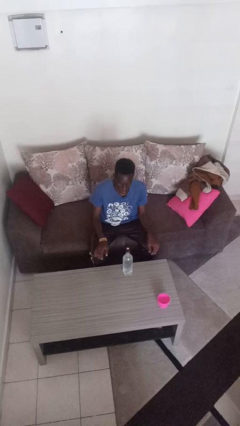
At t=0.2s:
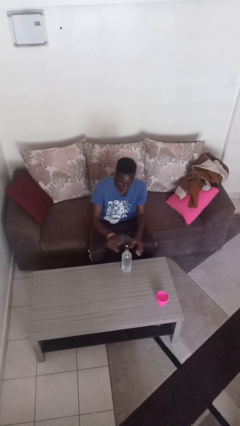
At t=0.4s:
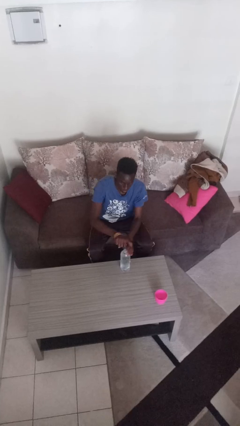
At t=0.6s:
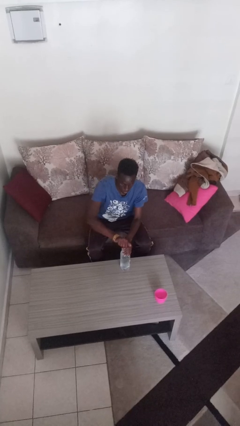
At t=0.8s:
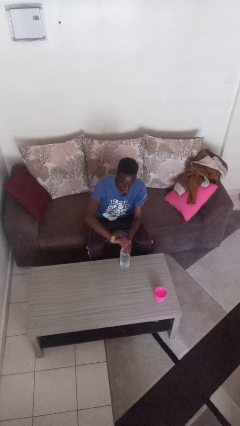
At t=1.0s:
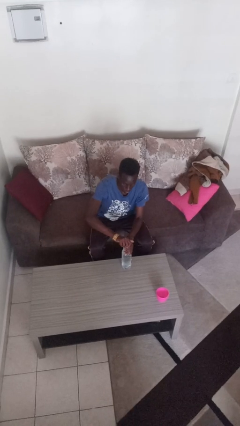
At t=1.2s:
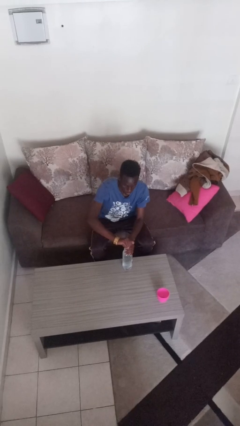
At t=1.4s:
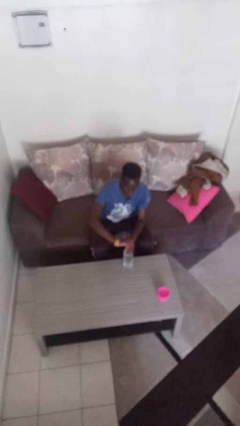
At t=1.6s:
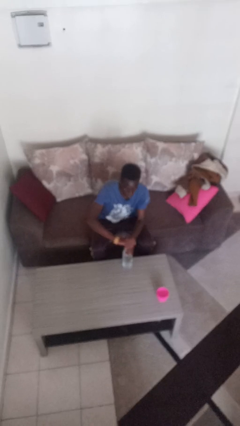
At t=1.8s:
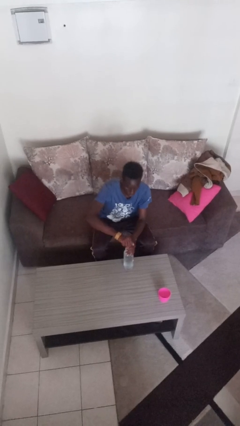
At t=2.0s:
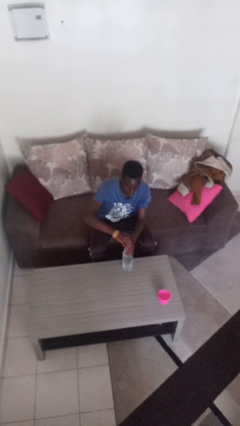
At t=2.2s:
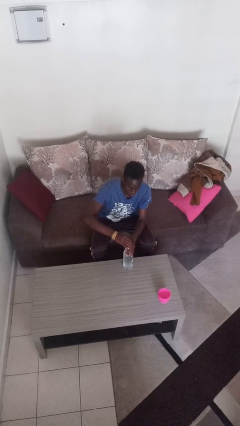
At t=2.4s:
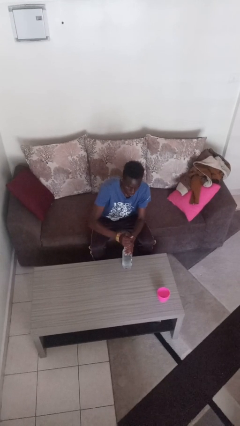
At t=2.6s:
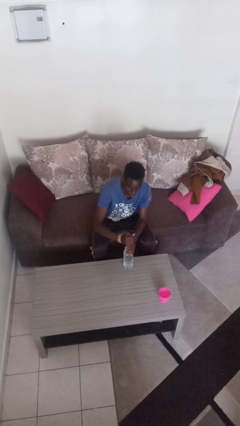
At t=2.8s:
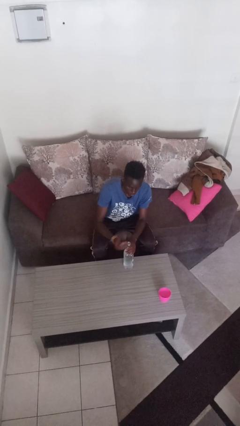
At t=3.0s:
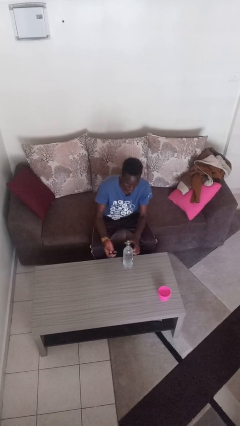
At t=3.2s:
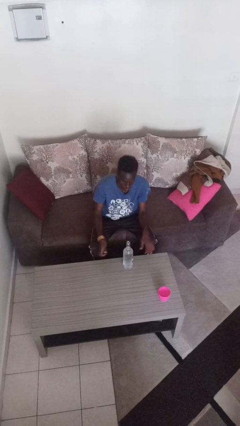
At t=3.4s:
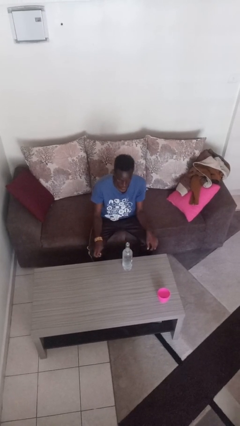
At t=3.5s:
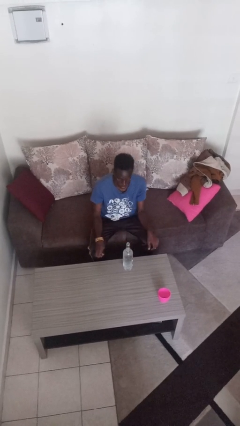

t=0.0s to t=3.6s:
person unscrews lid from bottle

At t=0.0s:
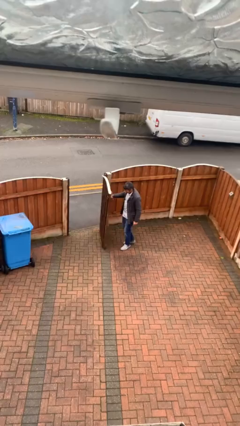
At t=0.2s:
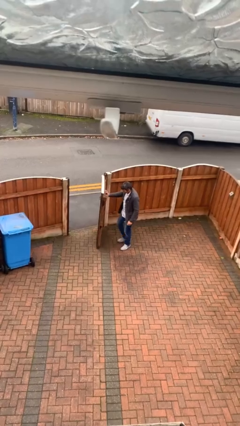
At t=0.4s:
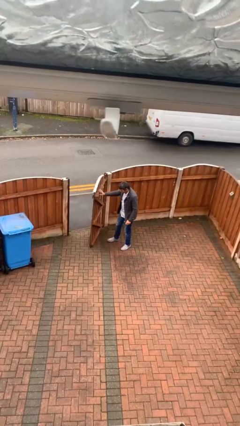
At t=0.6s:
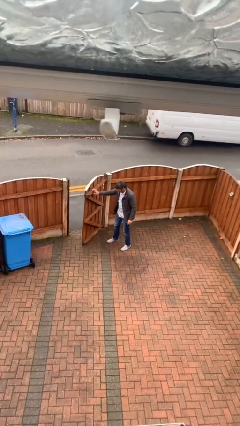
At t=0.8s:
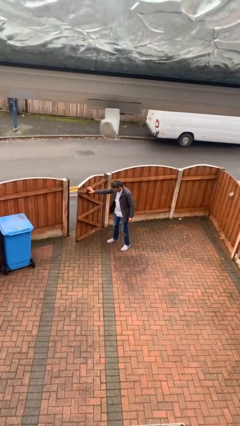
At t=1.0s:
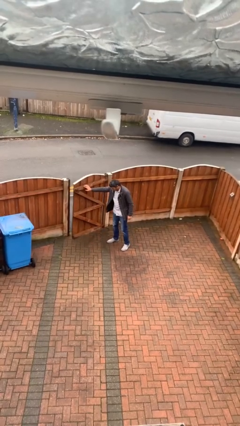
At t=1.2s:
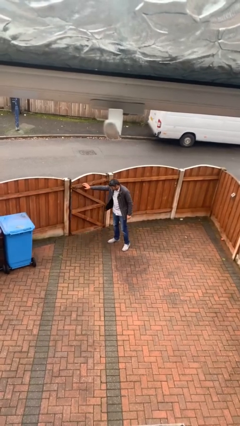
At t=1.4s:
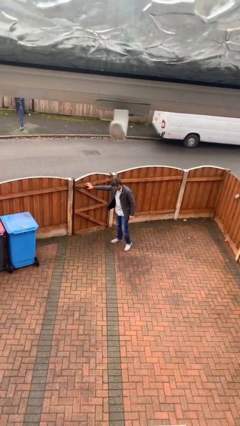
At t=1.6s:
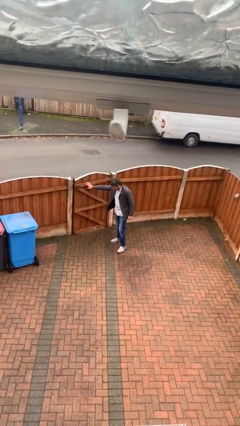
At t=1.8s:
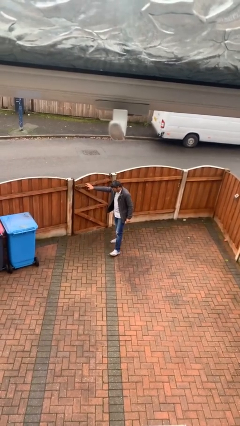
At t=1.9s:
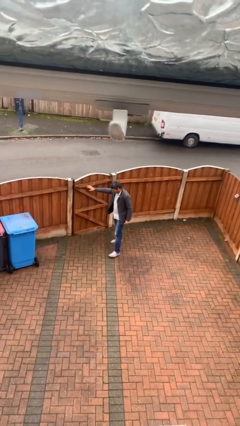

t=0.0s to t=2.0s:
person closes facility door

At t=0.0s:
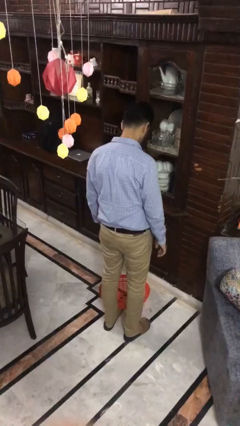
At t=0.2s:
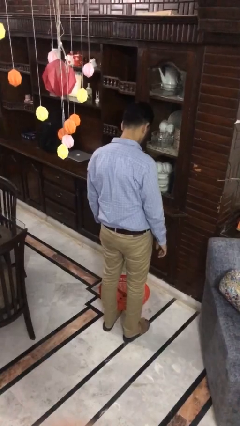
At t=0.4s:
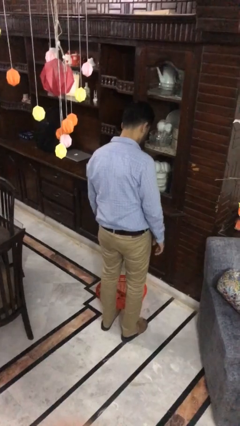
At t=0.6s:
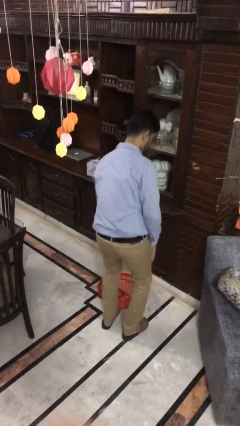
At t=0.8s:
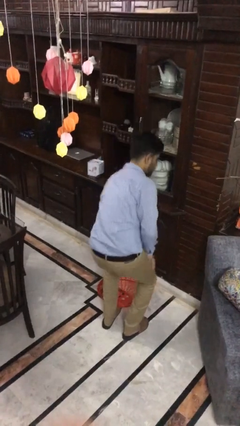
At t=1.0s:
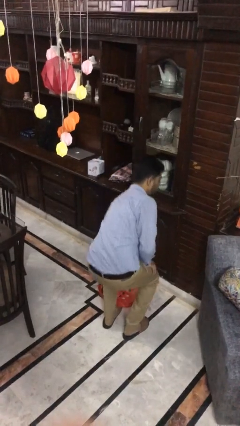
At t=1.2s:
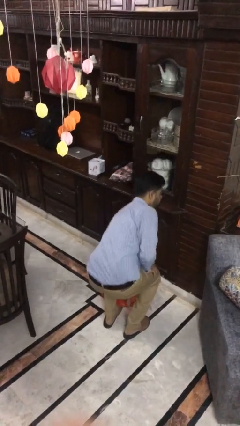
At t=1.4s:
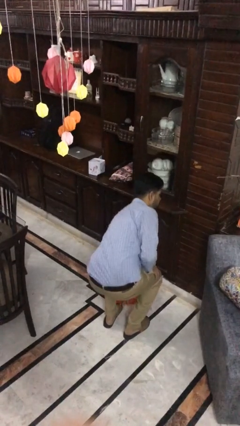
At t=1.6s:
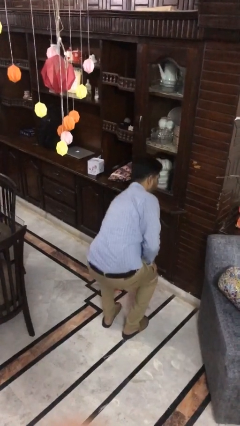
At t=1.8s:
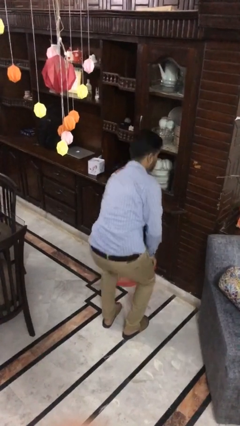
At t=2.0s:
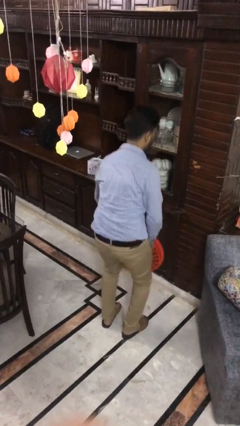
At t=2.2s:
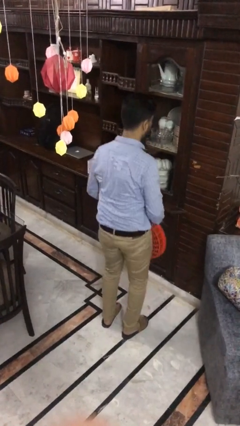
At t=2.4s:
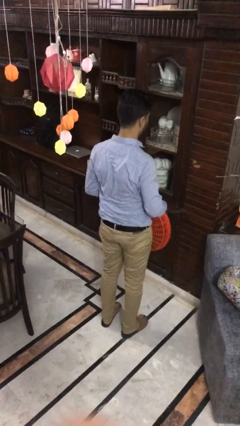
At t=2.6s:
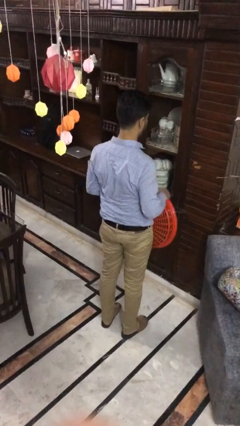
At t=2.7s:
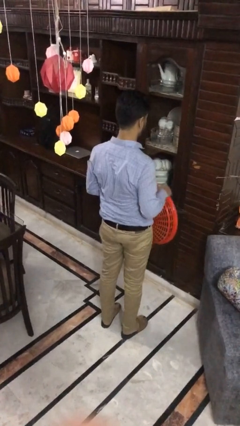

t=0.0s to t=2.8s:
person picks up object from floor

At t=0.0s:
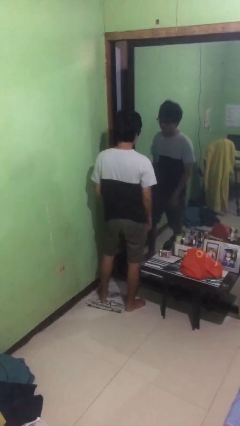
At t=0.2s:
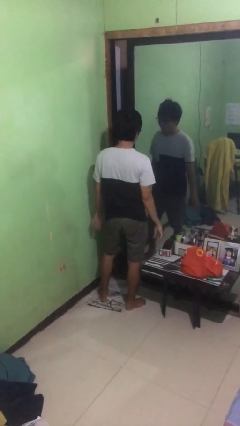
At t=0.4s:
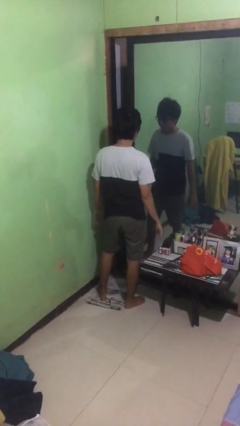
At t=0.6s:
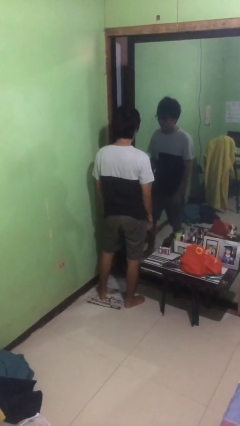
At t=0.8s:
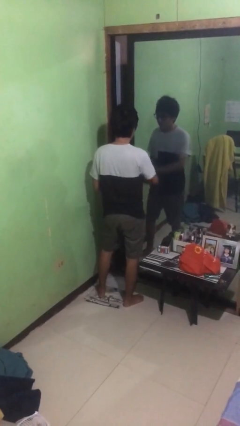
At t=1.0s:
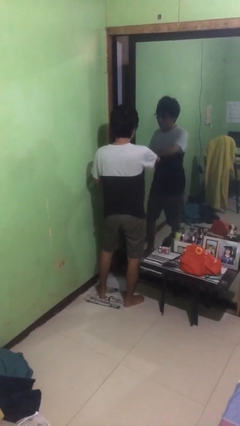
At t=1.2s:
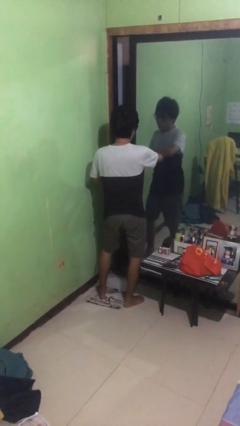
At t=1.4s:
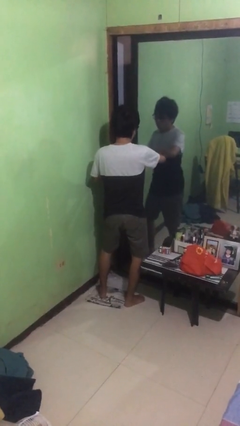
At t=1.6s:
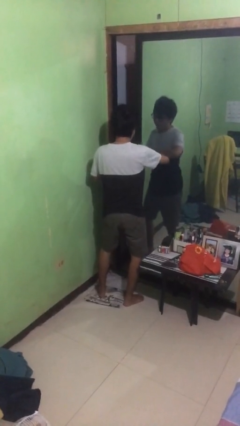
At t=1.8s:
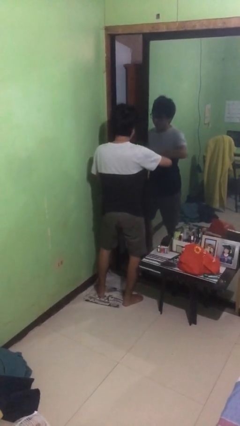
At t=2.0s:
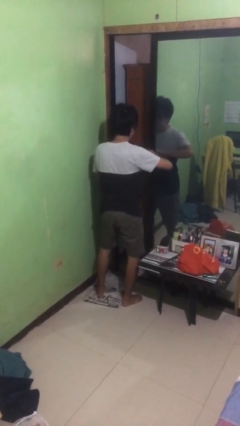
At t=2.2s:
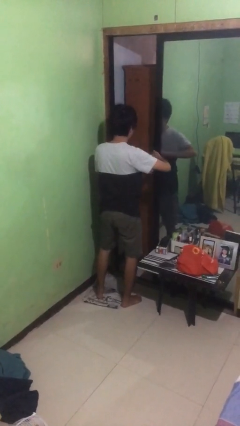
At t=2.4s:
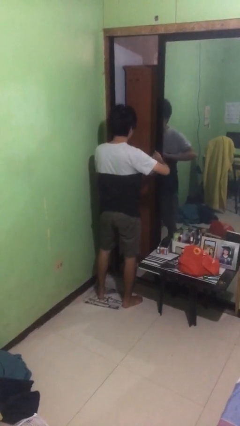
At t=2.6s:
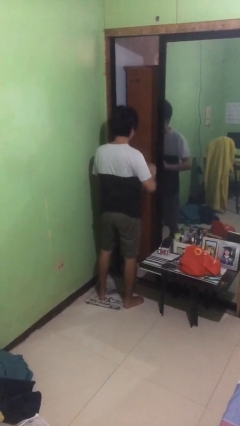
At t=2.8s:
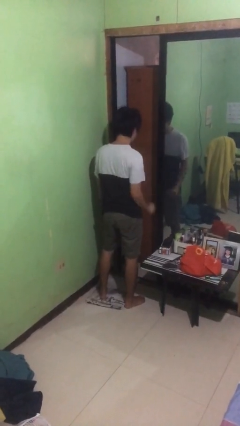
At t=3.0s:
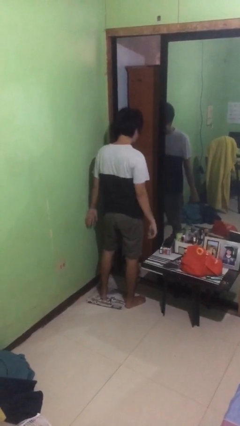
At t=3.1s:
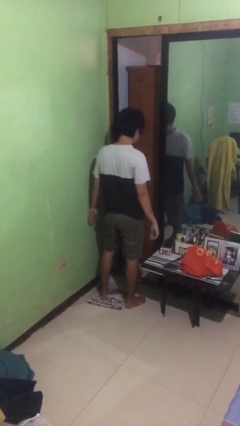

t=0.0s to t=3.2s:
person opens sliding door

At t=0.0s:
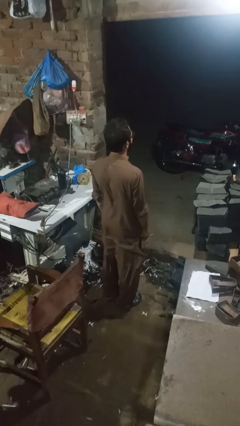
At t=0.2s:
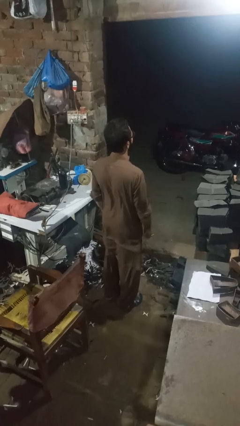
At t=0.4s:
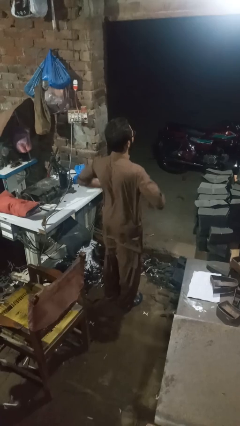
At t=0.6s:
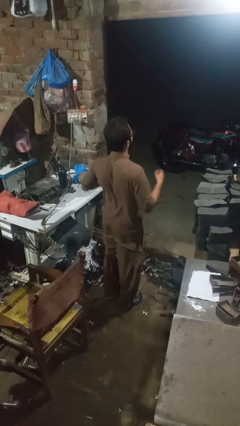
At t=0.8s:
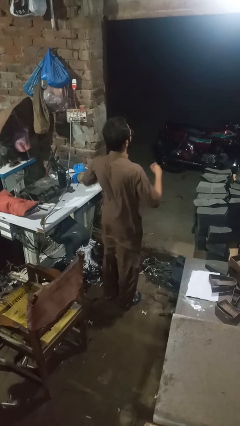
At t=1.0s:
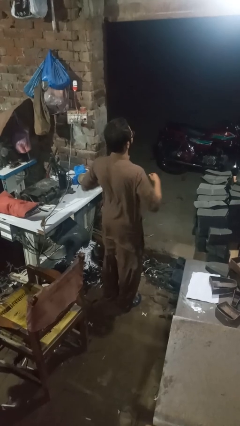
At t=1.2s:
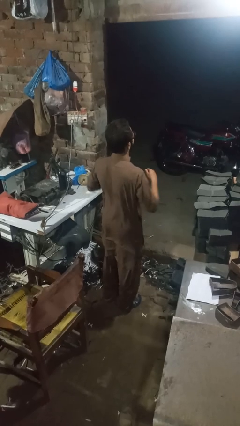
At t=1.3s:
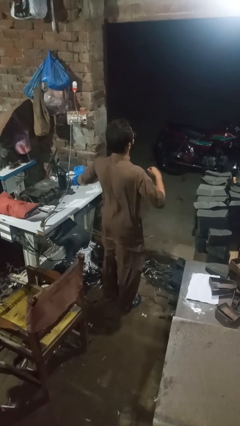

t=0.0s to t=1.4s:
person dances in place

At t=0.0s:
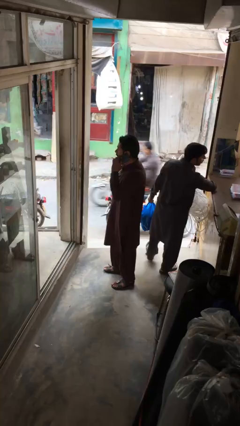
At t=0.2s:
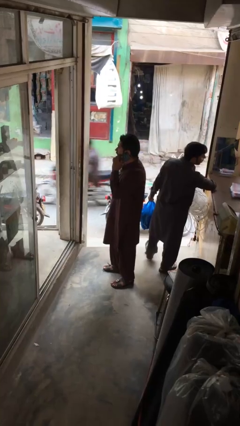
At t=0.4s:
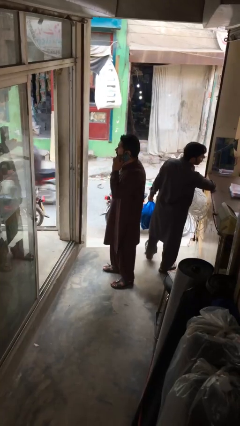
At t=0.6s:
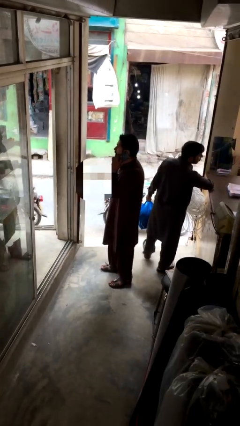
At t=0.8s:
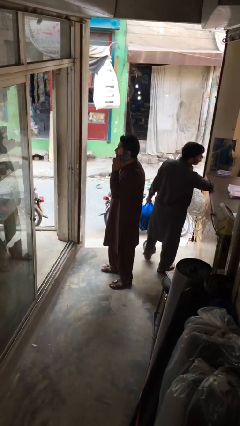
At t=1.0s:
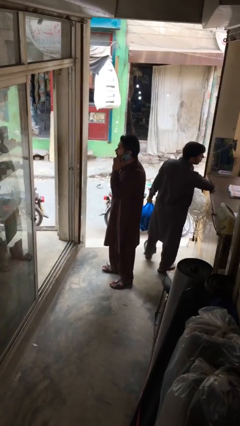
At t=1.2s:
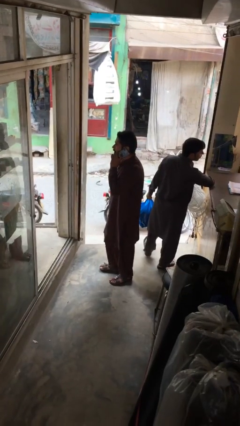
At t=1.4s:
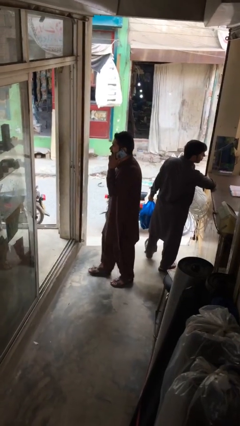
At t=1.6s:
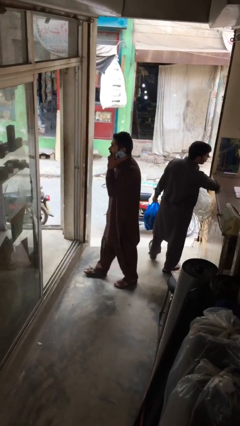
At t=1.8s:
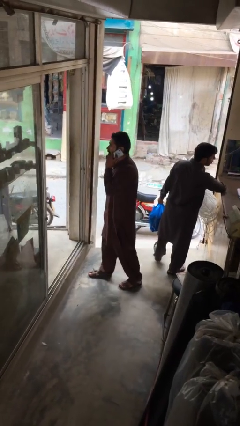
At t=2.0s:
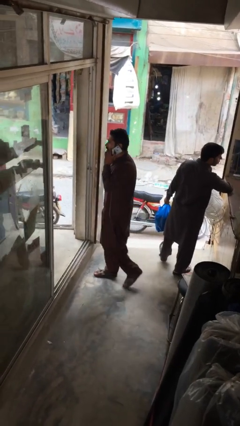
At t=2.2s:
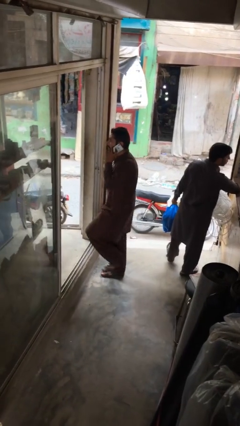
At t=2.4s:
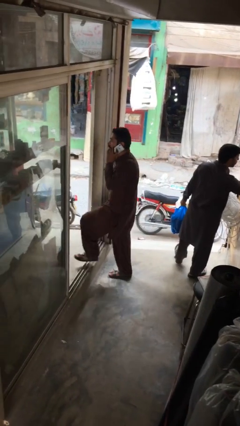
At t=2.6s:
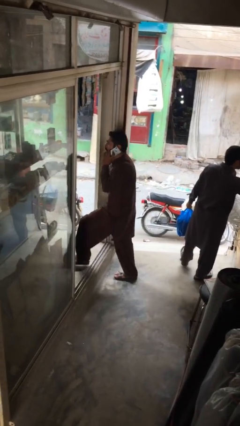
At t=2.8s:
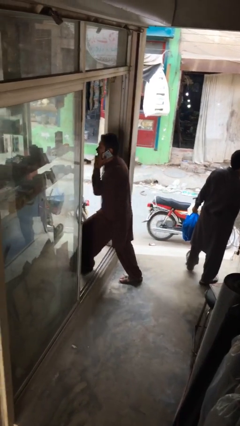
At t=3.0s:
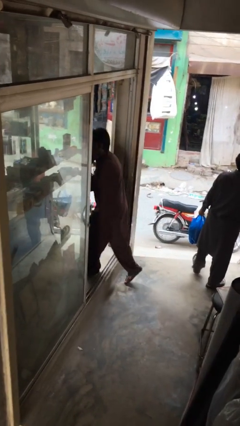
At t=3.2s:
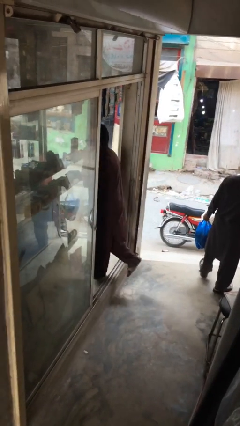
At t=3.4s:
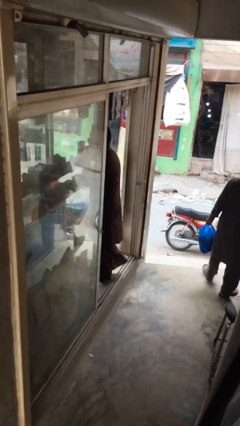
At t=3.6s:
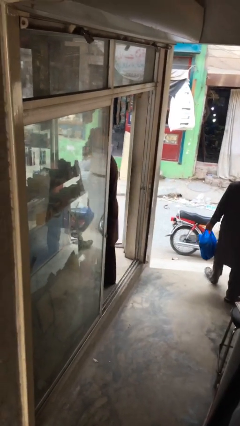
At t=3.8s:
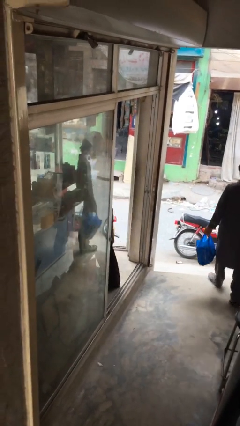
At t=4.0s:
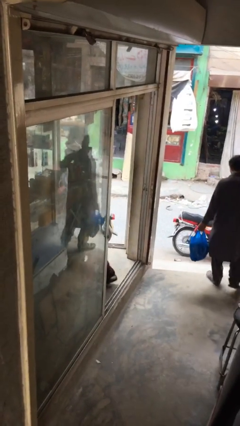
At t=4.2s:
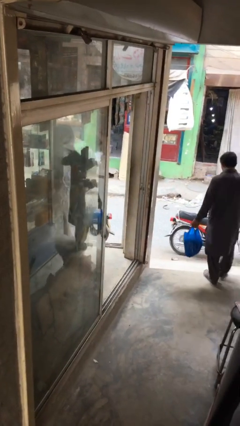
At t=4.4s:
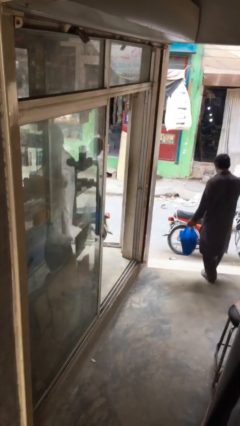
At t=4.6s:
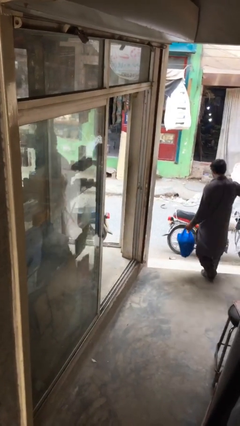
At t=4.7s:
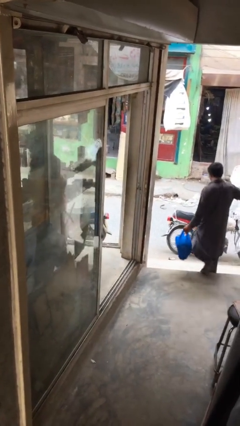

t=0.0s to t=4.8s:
person exits scene through structure
